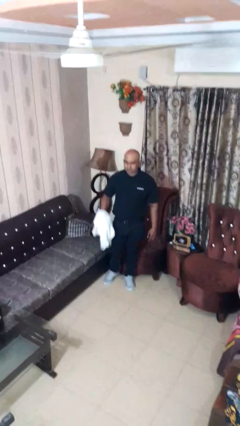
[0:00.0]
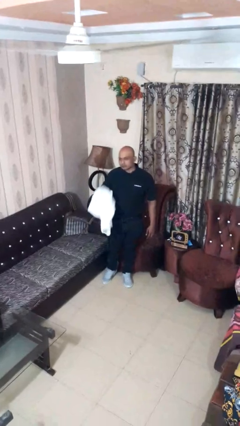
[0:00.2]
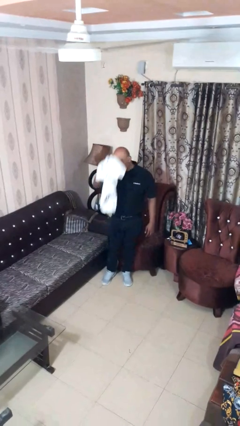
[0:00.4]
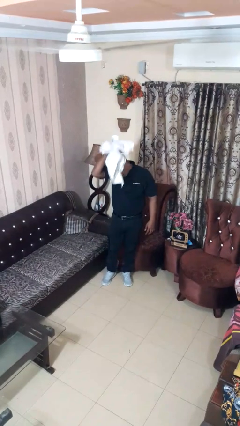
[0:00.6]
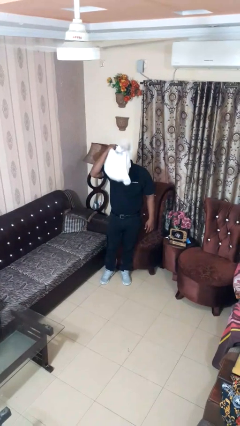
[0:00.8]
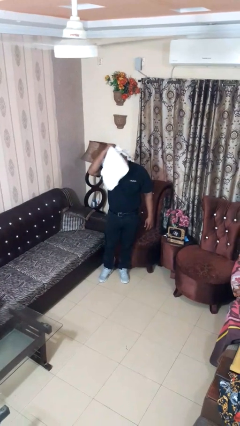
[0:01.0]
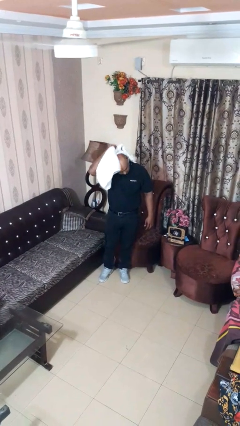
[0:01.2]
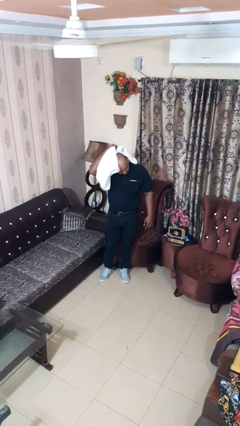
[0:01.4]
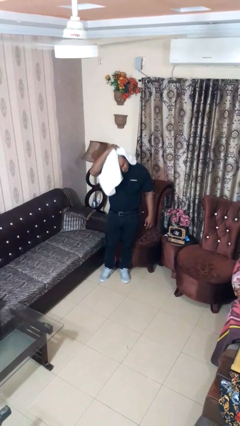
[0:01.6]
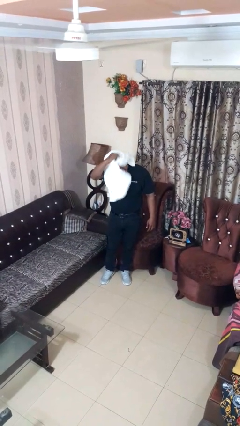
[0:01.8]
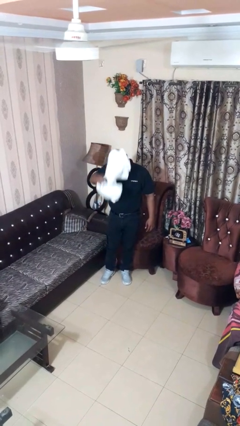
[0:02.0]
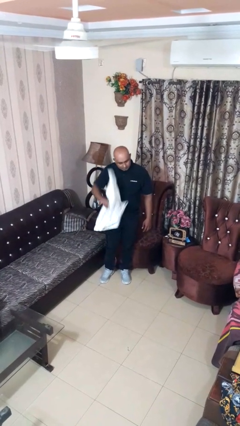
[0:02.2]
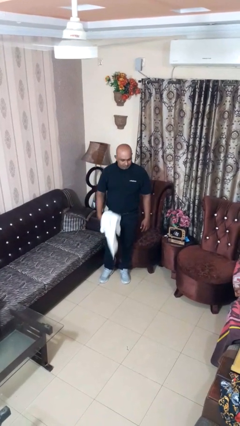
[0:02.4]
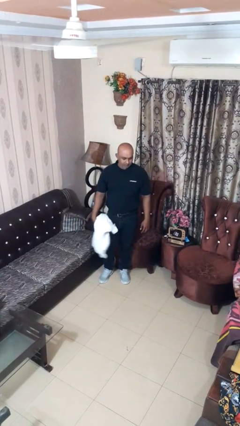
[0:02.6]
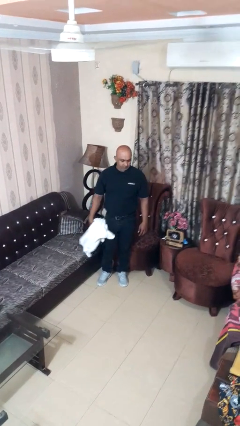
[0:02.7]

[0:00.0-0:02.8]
person dries hair with towel

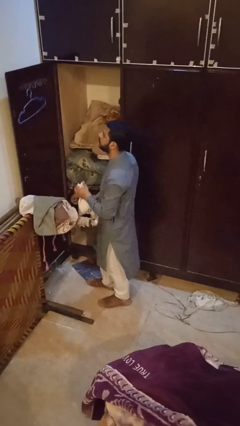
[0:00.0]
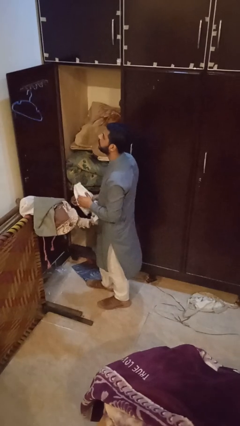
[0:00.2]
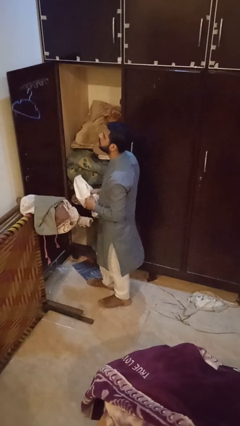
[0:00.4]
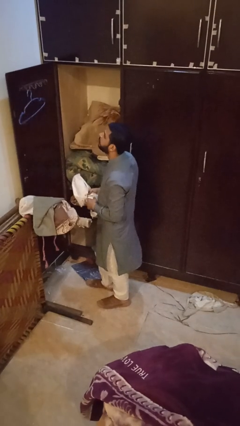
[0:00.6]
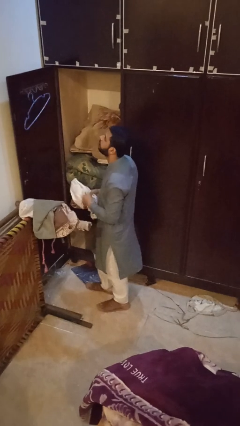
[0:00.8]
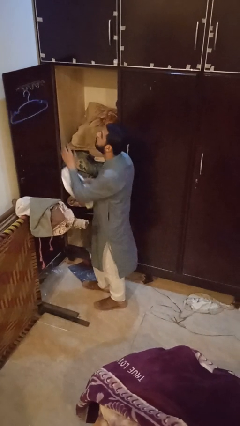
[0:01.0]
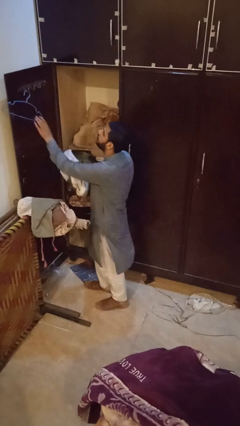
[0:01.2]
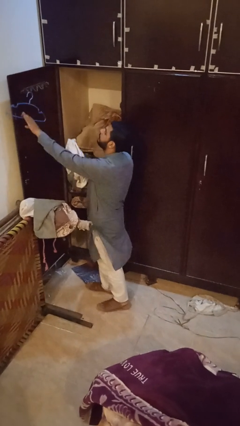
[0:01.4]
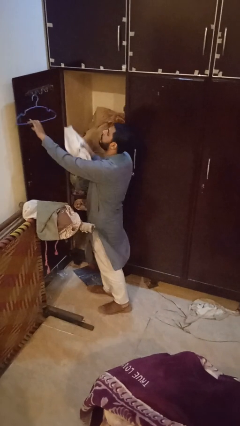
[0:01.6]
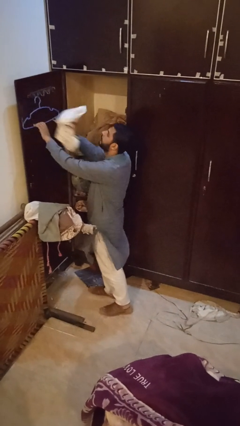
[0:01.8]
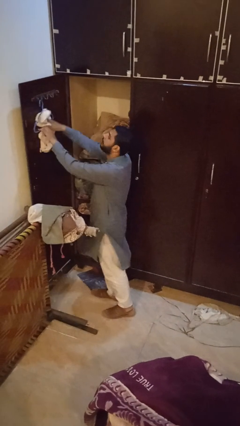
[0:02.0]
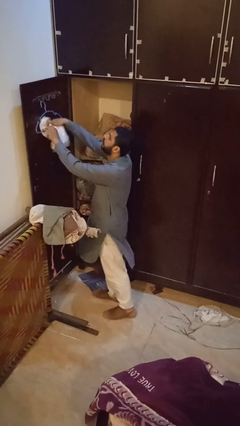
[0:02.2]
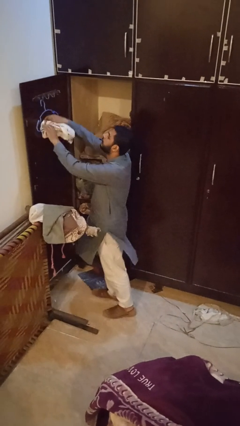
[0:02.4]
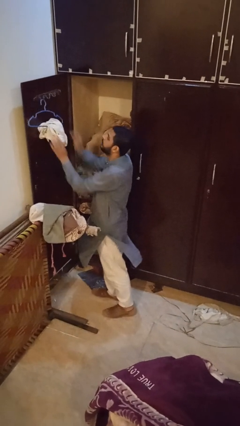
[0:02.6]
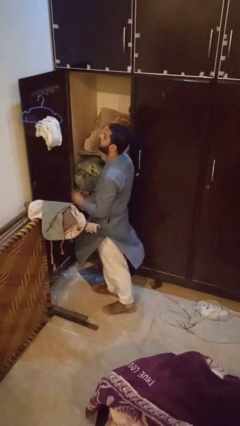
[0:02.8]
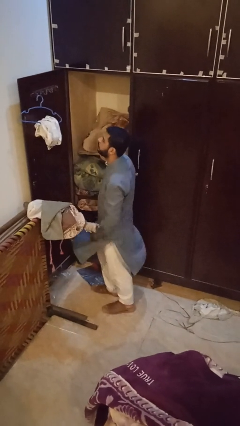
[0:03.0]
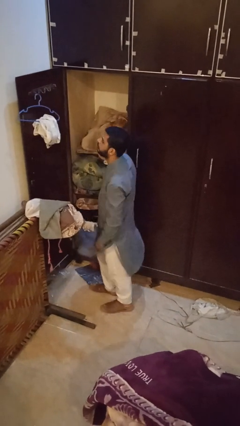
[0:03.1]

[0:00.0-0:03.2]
person puts clothes into closet

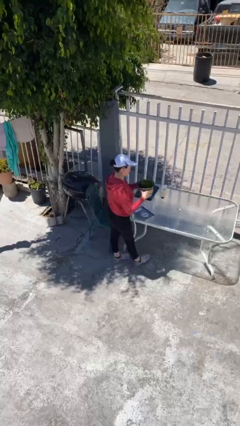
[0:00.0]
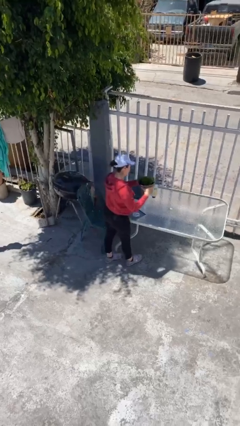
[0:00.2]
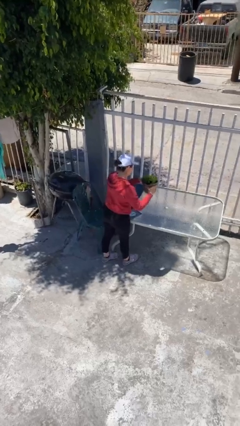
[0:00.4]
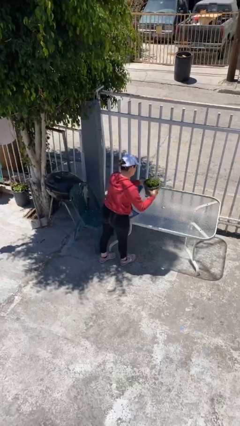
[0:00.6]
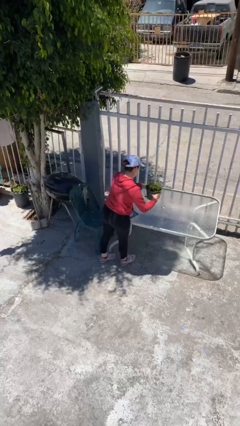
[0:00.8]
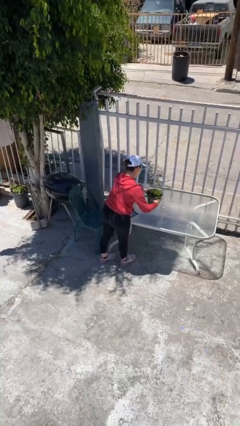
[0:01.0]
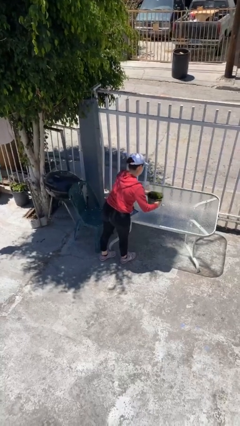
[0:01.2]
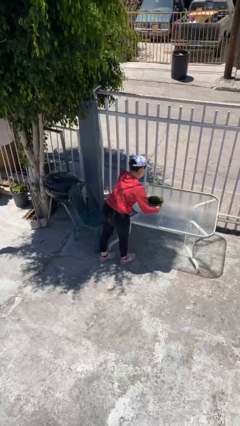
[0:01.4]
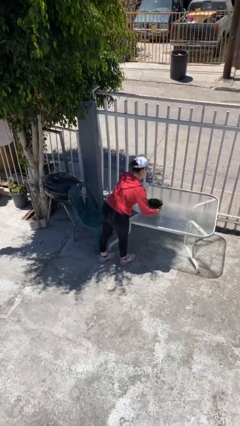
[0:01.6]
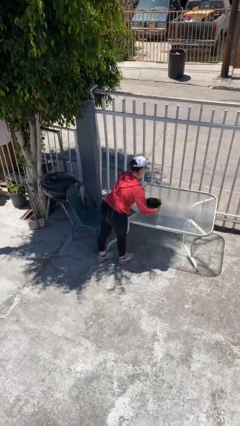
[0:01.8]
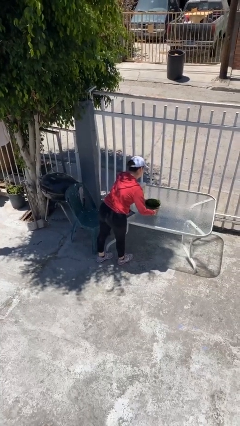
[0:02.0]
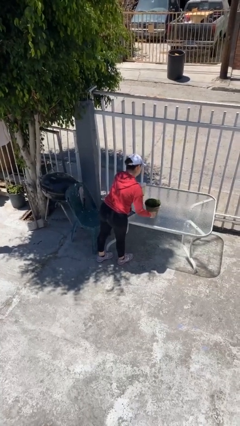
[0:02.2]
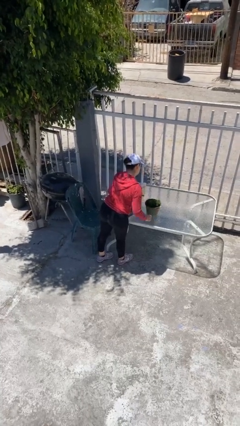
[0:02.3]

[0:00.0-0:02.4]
person puts down object on table

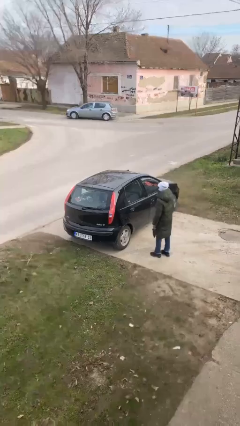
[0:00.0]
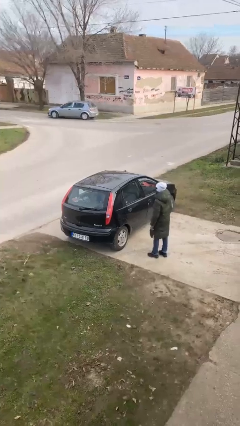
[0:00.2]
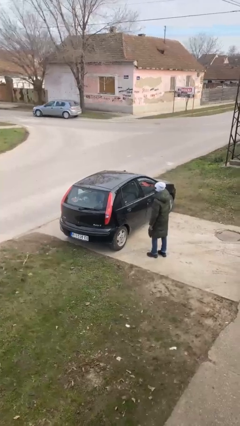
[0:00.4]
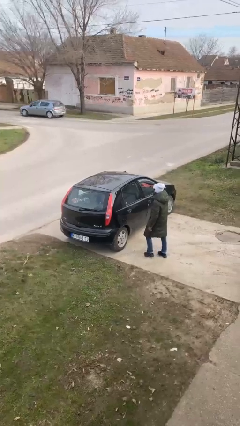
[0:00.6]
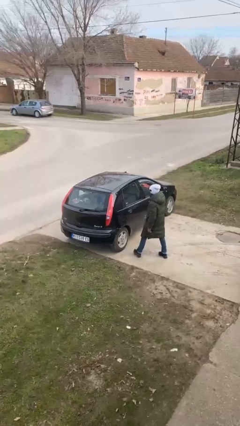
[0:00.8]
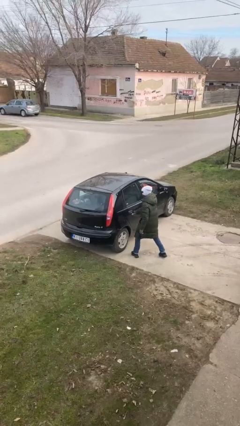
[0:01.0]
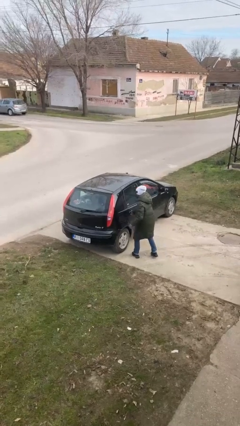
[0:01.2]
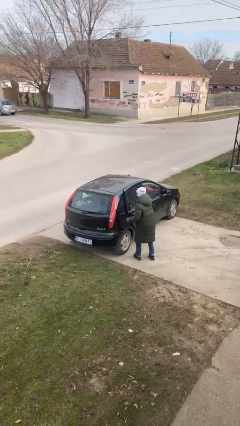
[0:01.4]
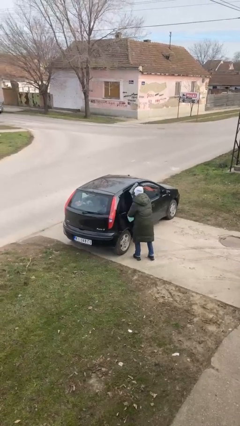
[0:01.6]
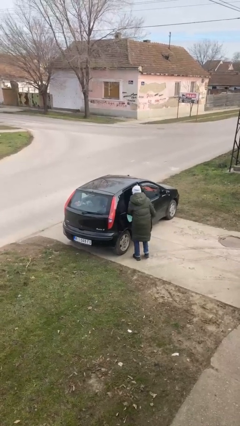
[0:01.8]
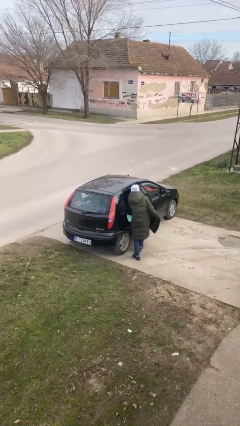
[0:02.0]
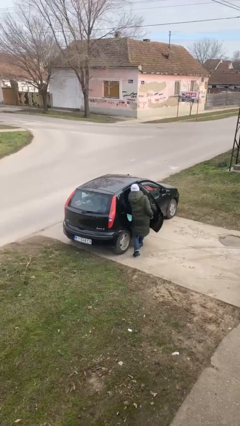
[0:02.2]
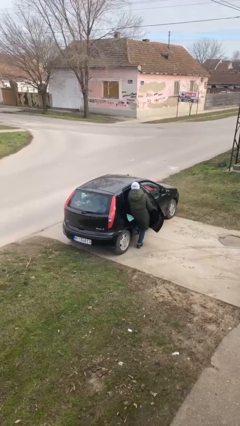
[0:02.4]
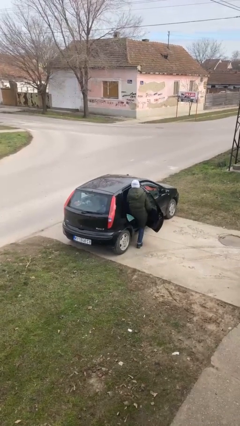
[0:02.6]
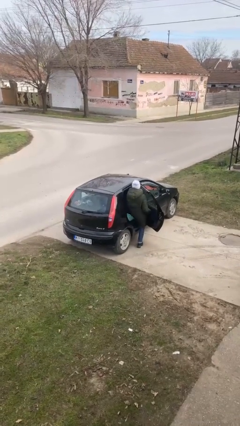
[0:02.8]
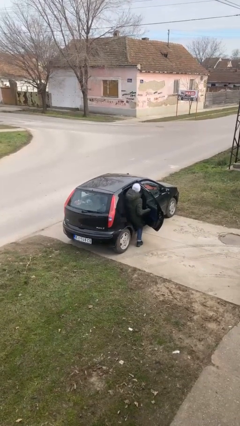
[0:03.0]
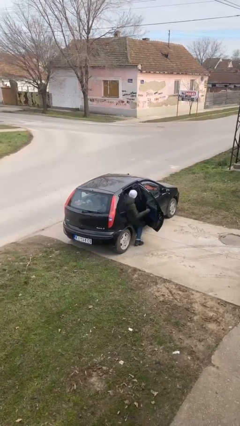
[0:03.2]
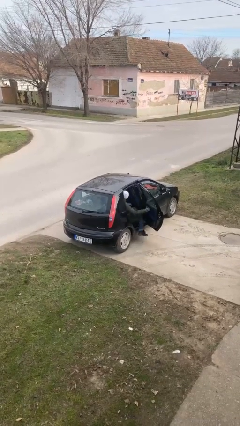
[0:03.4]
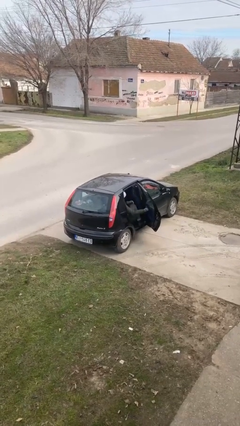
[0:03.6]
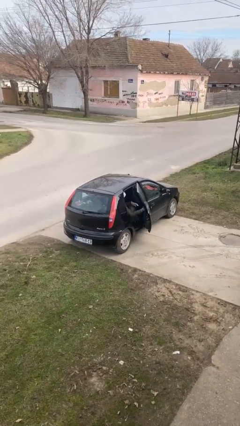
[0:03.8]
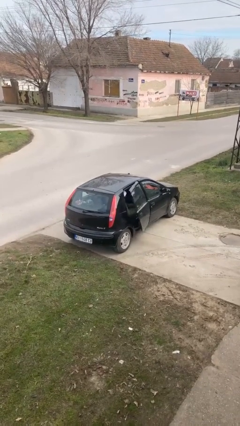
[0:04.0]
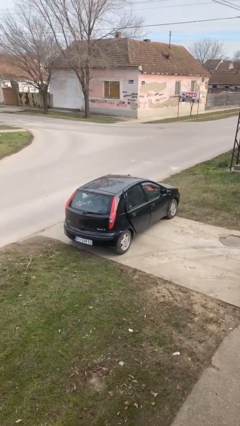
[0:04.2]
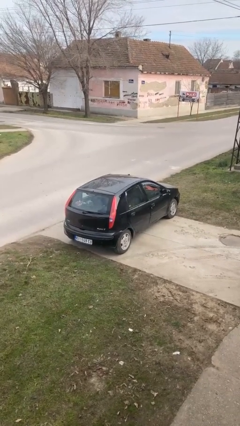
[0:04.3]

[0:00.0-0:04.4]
car picks up person

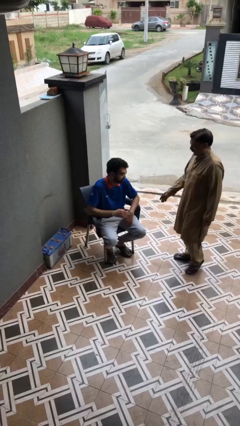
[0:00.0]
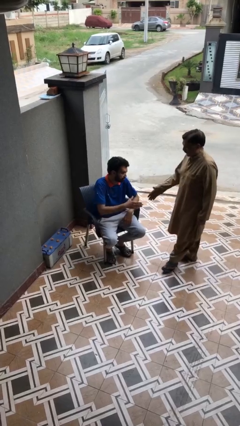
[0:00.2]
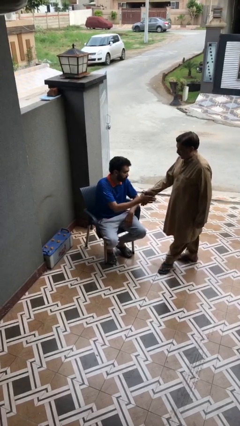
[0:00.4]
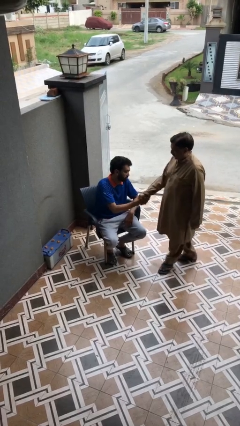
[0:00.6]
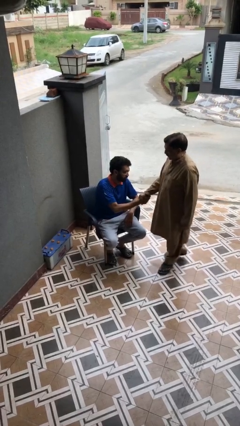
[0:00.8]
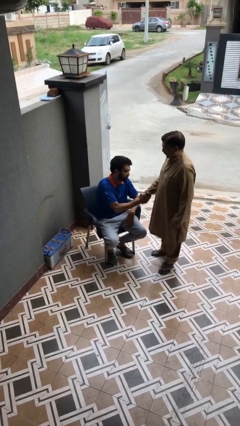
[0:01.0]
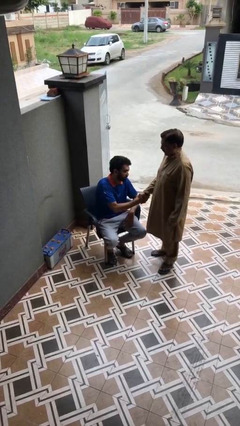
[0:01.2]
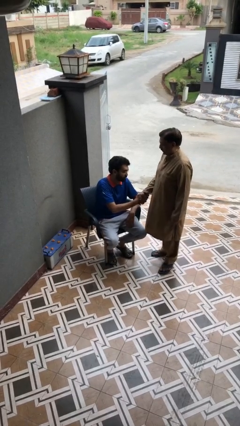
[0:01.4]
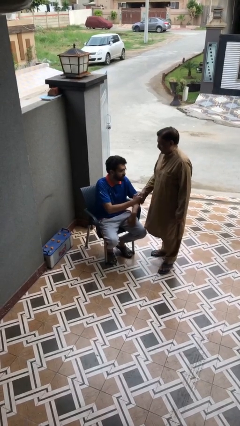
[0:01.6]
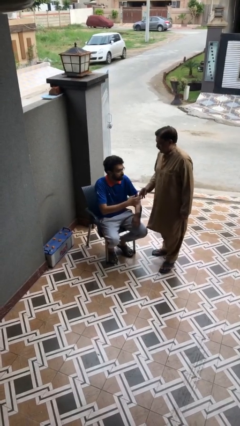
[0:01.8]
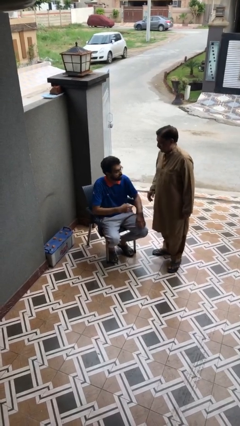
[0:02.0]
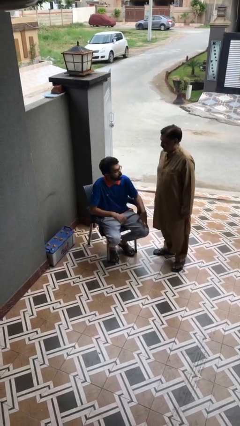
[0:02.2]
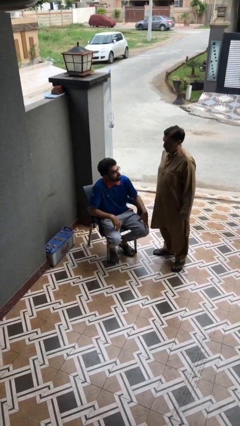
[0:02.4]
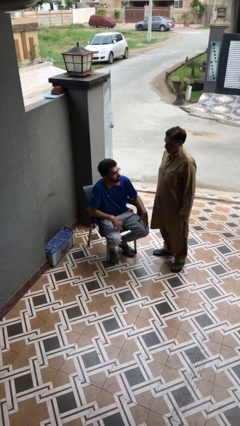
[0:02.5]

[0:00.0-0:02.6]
person shakes hand

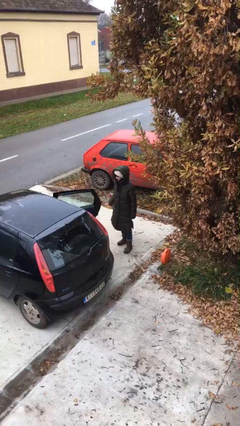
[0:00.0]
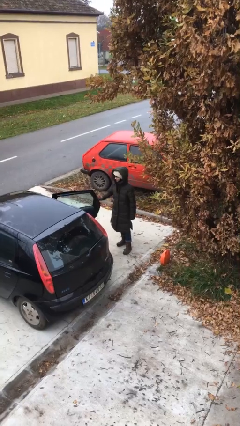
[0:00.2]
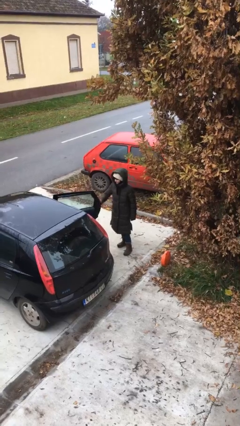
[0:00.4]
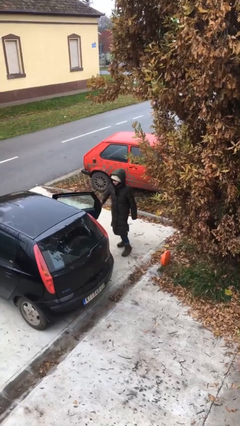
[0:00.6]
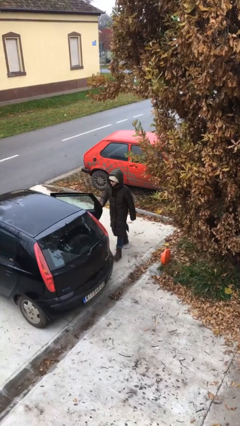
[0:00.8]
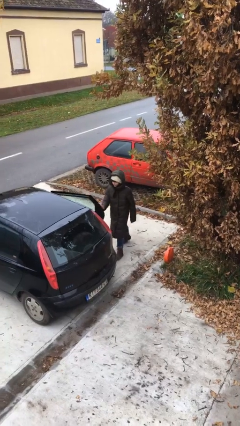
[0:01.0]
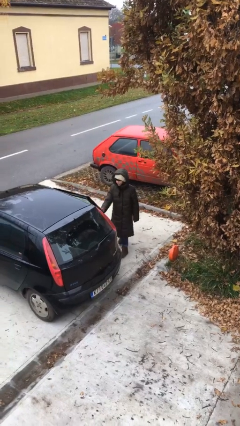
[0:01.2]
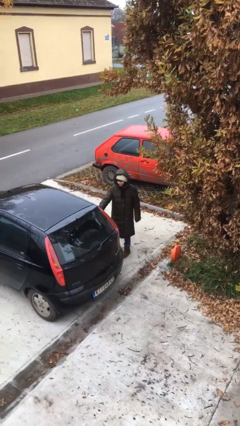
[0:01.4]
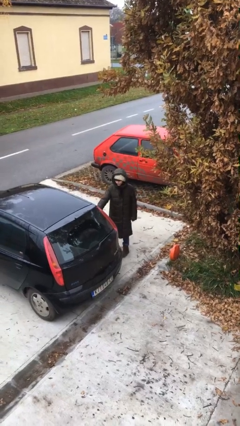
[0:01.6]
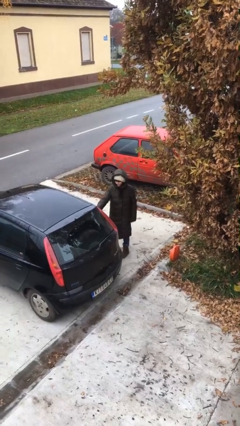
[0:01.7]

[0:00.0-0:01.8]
person closes car door
